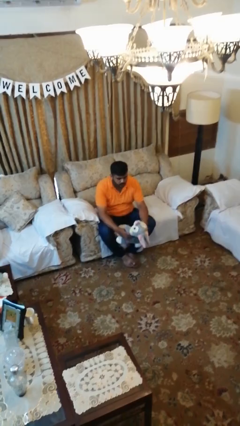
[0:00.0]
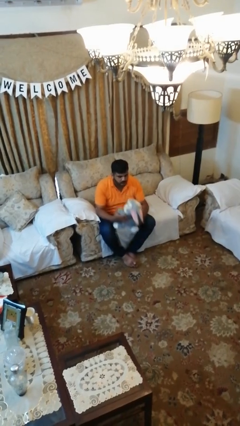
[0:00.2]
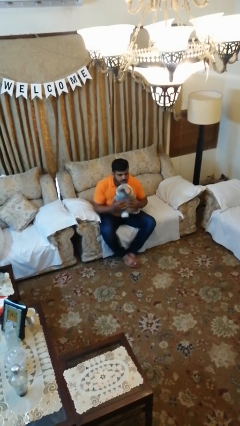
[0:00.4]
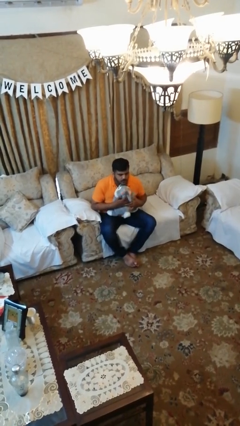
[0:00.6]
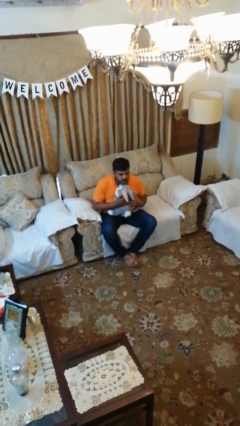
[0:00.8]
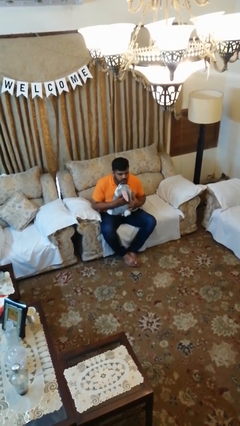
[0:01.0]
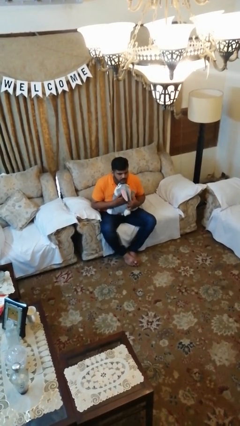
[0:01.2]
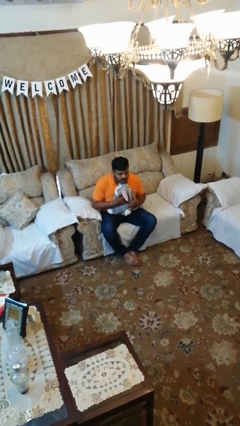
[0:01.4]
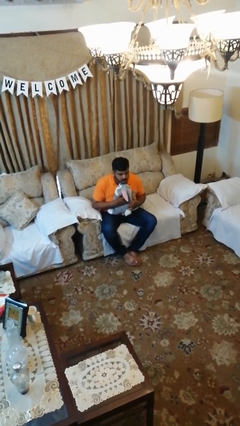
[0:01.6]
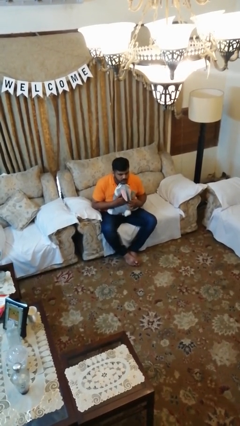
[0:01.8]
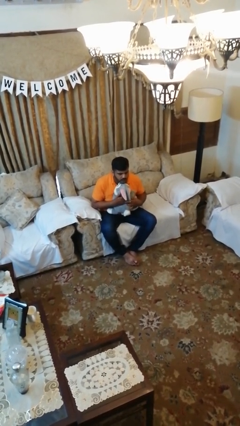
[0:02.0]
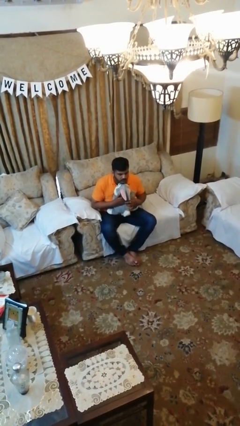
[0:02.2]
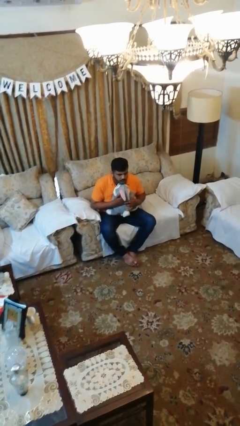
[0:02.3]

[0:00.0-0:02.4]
person hugs stuffed animal

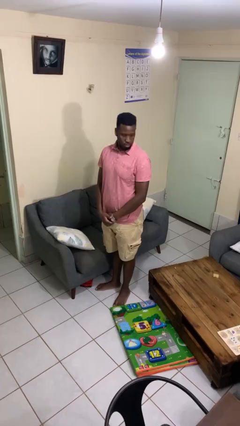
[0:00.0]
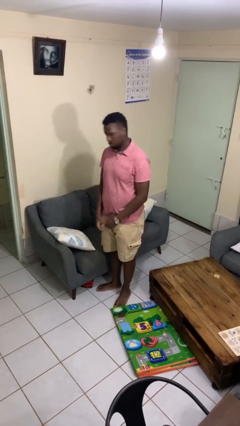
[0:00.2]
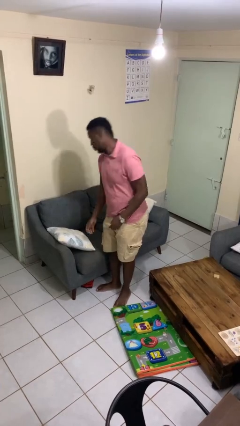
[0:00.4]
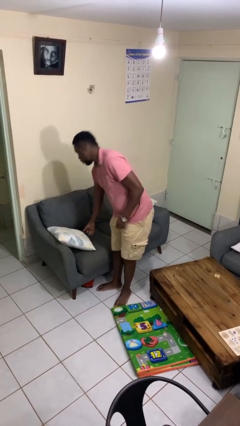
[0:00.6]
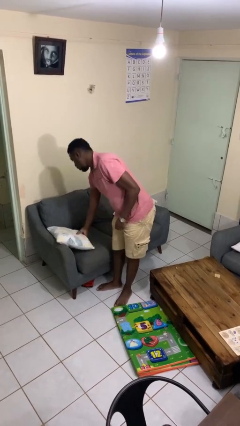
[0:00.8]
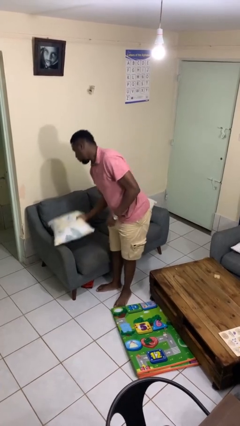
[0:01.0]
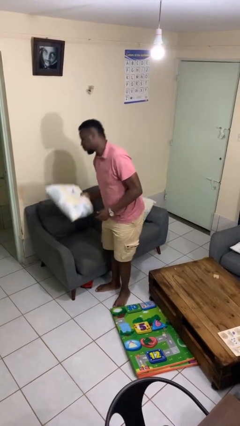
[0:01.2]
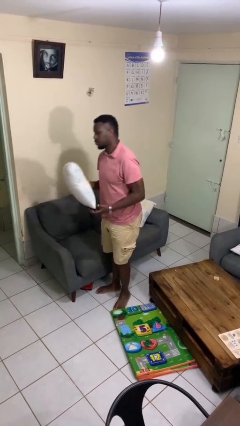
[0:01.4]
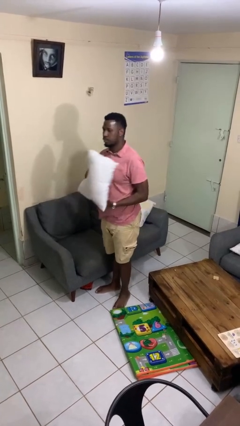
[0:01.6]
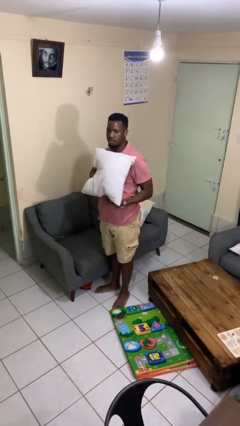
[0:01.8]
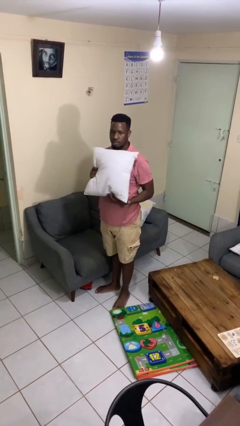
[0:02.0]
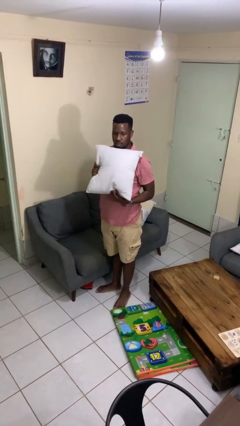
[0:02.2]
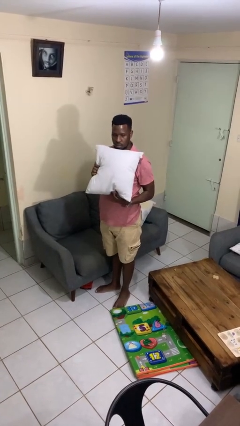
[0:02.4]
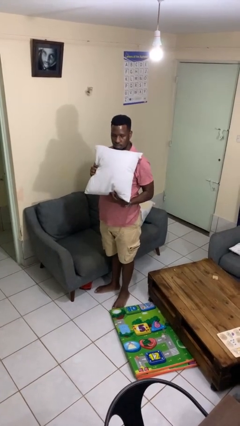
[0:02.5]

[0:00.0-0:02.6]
person picks up object from couch

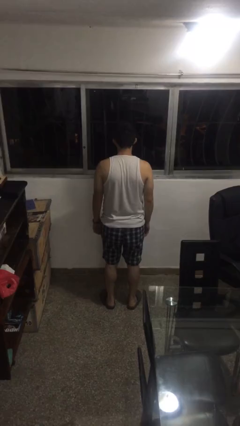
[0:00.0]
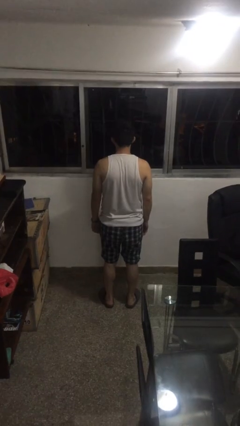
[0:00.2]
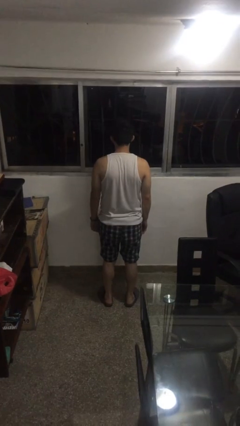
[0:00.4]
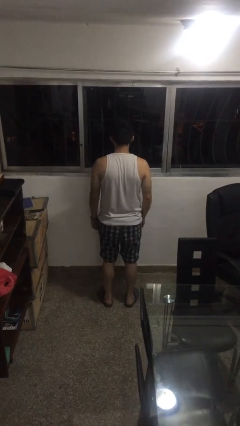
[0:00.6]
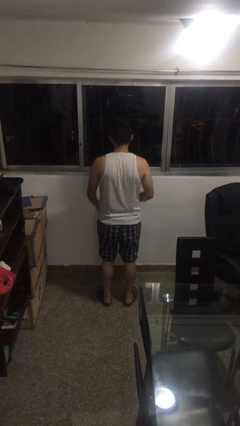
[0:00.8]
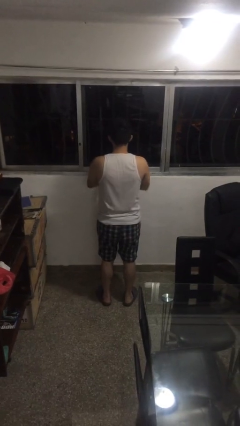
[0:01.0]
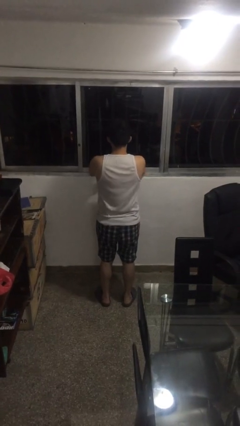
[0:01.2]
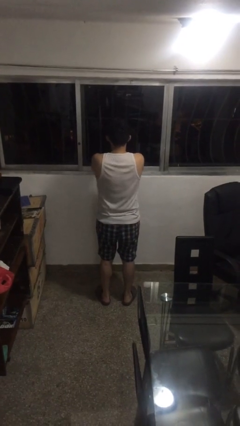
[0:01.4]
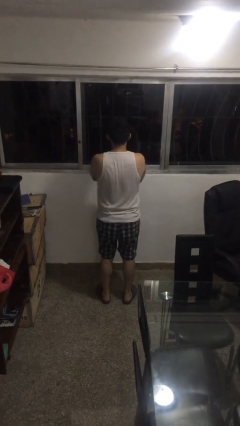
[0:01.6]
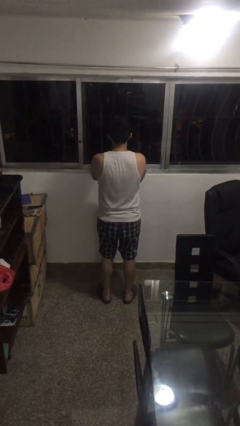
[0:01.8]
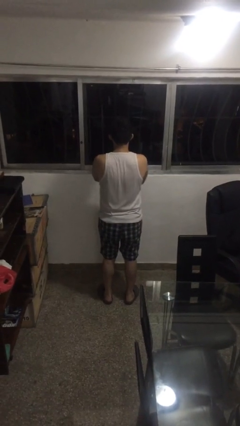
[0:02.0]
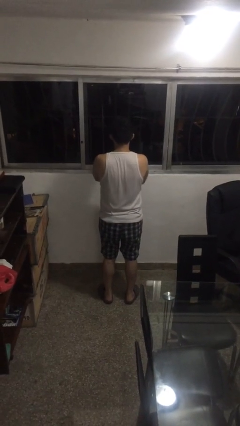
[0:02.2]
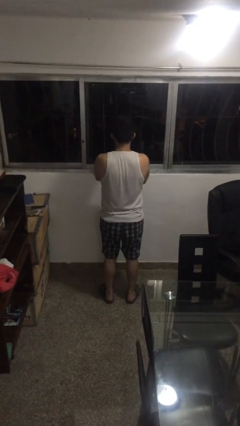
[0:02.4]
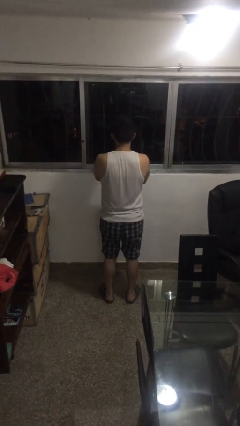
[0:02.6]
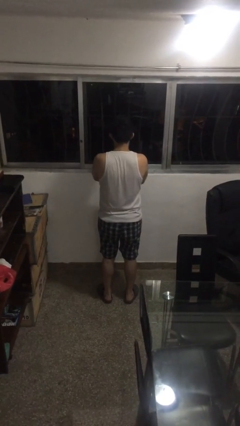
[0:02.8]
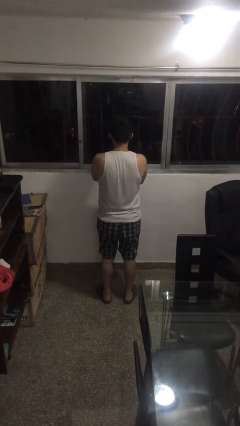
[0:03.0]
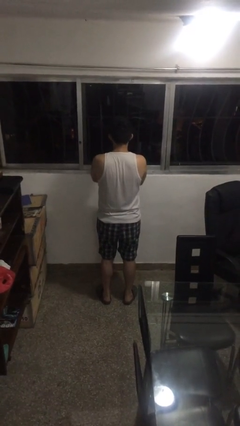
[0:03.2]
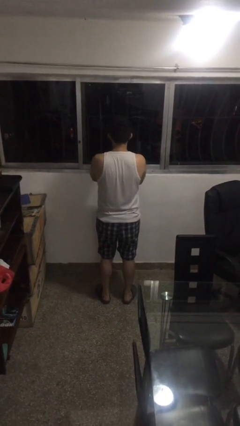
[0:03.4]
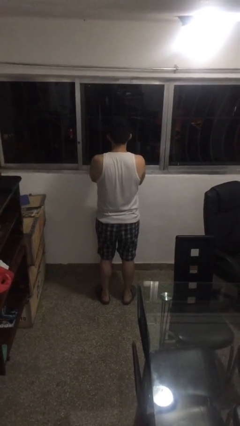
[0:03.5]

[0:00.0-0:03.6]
person crosses arms

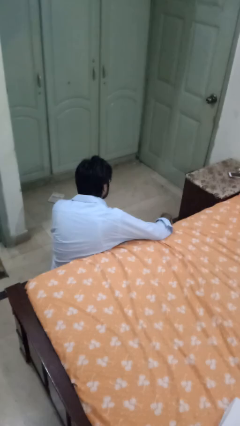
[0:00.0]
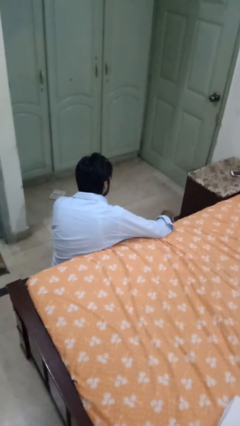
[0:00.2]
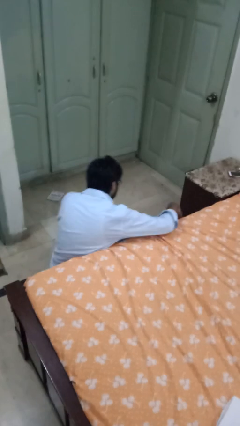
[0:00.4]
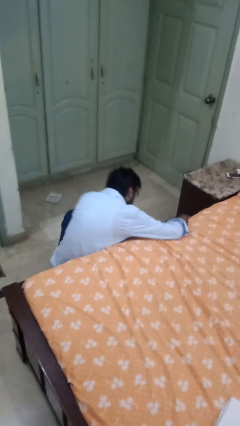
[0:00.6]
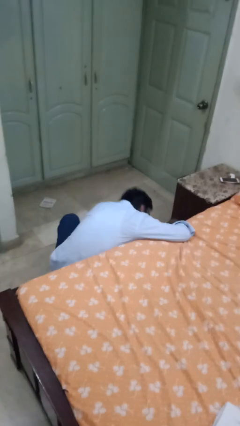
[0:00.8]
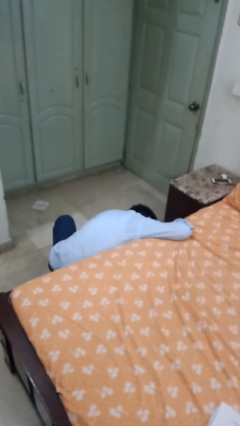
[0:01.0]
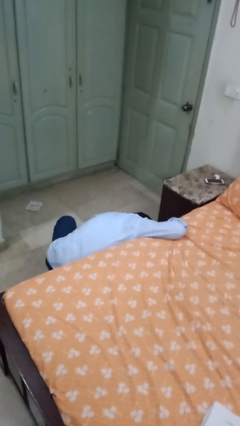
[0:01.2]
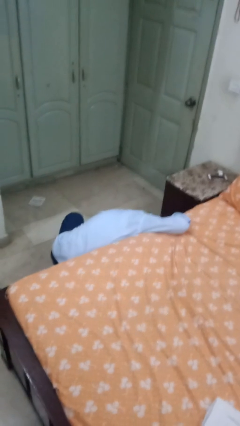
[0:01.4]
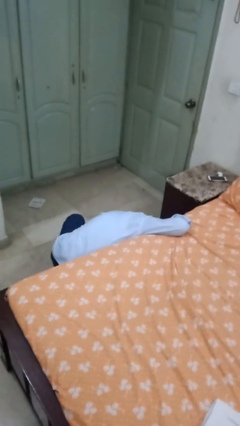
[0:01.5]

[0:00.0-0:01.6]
person searches under bed

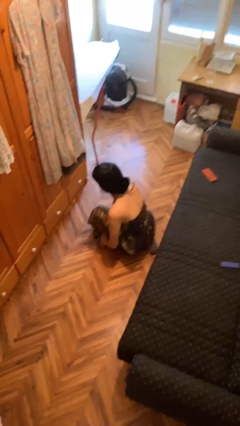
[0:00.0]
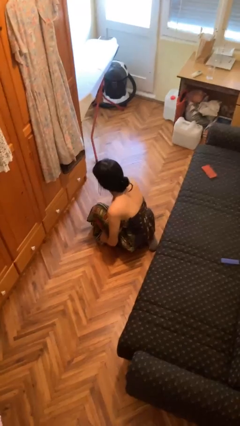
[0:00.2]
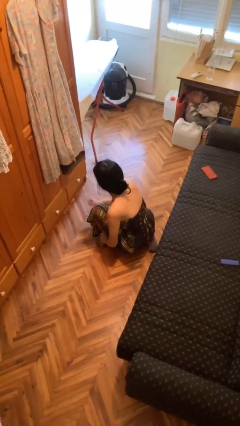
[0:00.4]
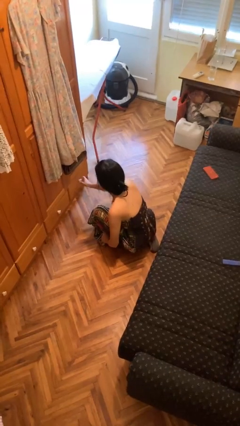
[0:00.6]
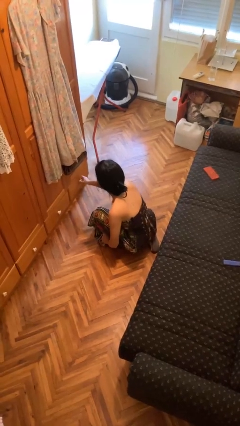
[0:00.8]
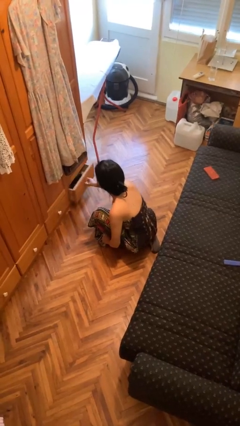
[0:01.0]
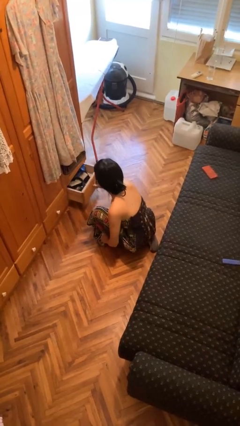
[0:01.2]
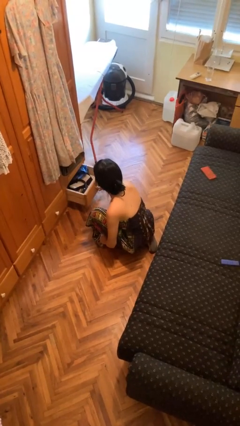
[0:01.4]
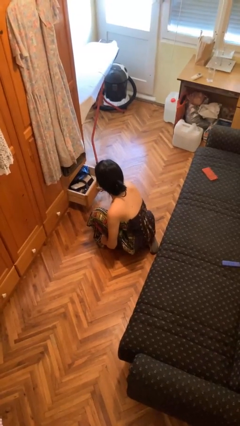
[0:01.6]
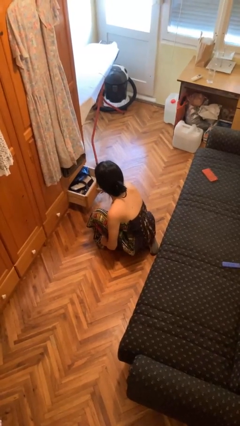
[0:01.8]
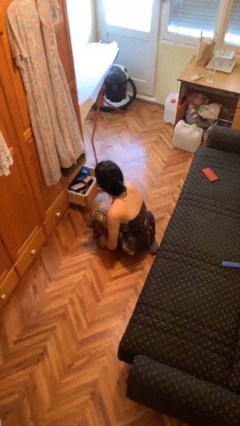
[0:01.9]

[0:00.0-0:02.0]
person opens dresser drawer

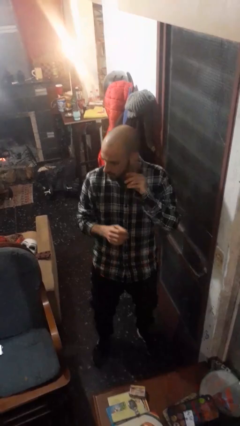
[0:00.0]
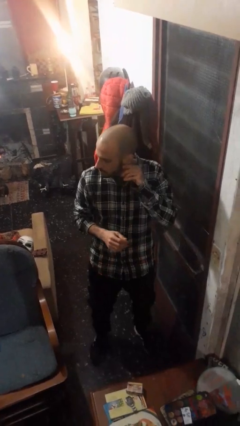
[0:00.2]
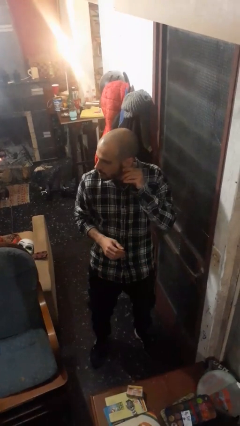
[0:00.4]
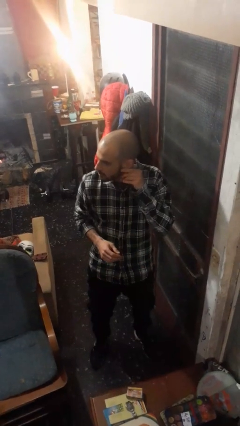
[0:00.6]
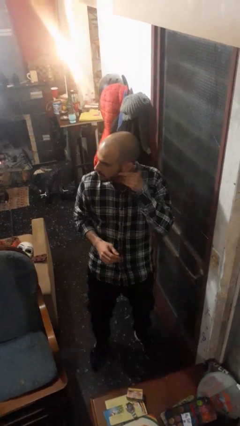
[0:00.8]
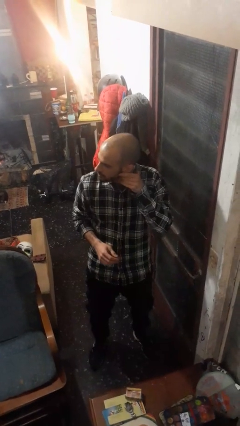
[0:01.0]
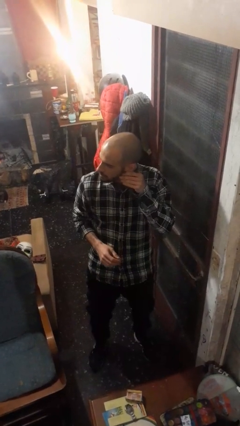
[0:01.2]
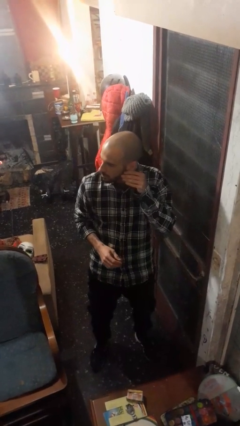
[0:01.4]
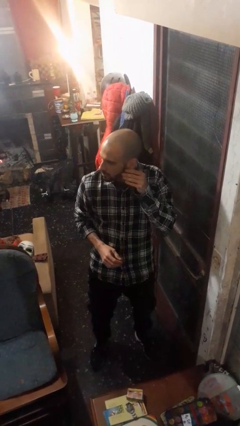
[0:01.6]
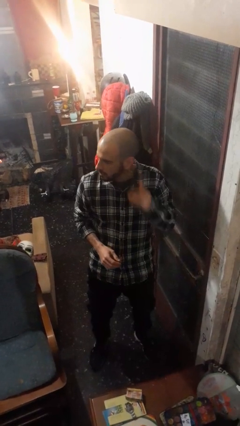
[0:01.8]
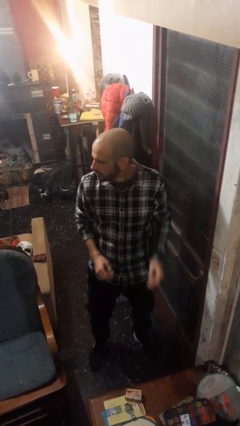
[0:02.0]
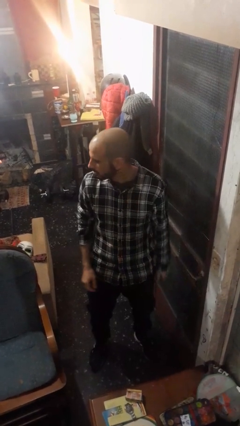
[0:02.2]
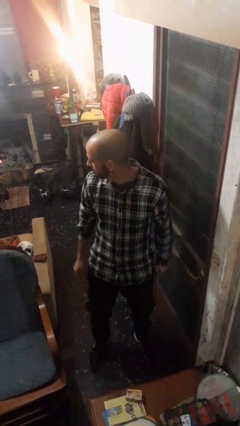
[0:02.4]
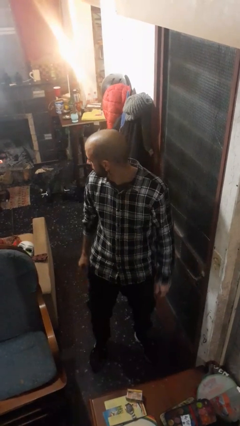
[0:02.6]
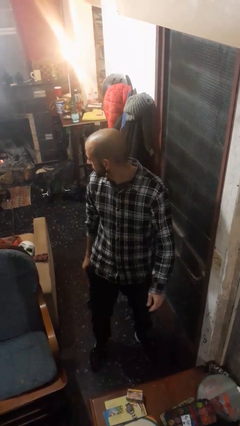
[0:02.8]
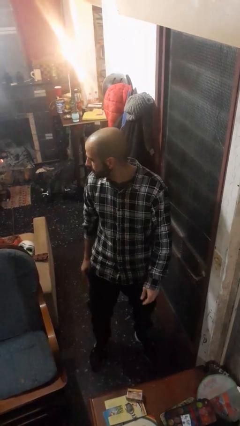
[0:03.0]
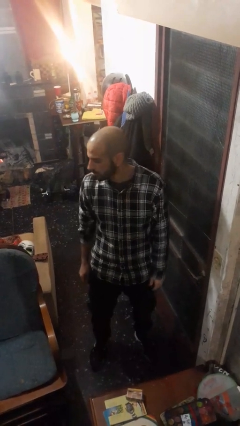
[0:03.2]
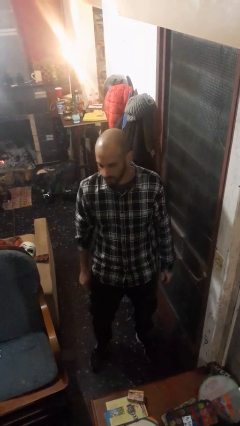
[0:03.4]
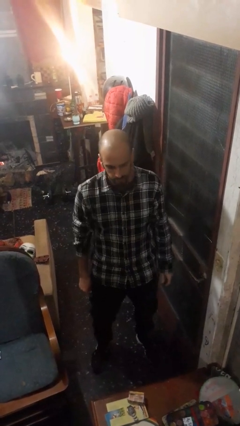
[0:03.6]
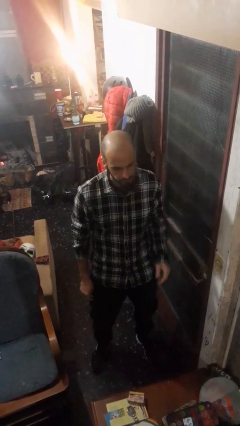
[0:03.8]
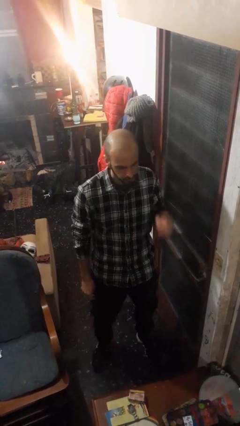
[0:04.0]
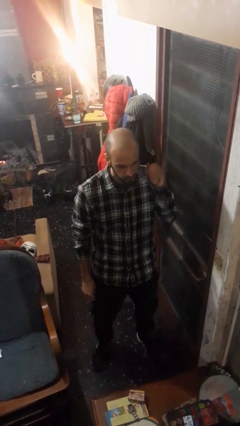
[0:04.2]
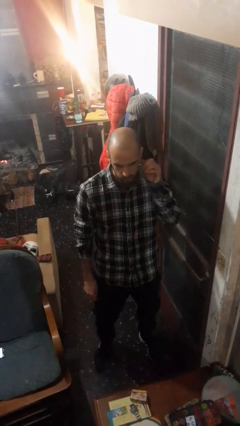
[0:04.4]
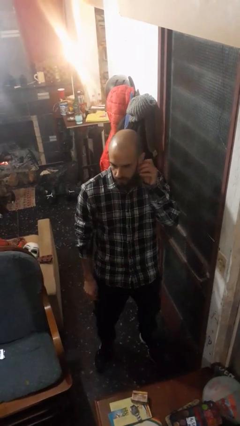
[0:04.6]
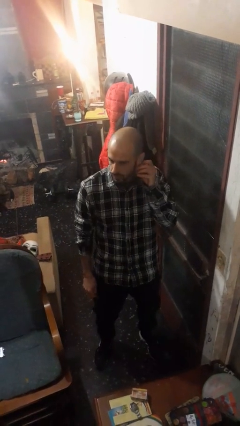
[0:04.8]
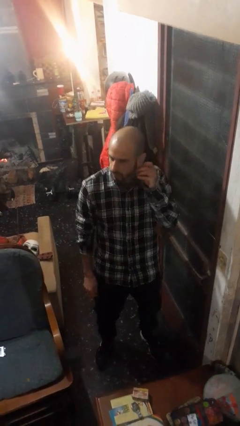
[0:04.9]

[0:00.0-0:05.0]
person puts on earrings
